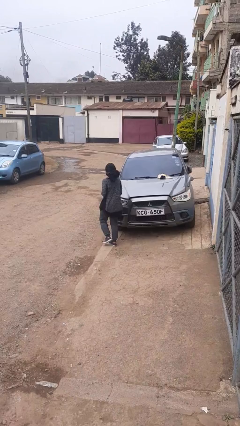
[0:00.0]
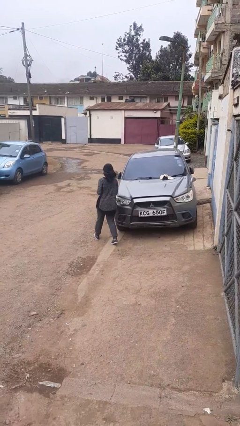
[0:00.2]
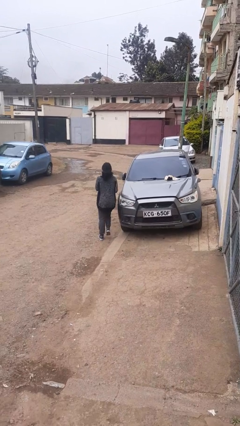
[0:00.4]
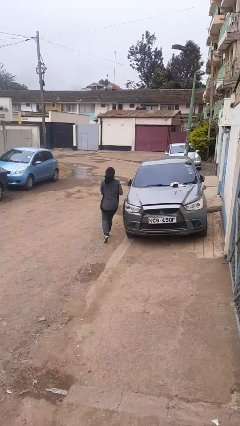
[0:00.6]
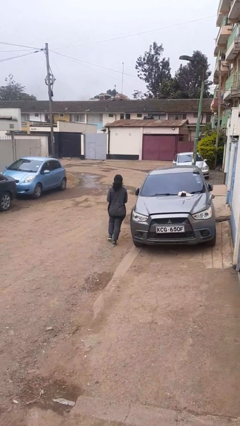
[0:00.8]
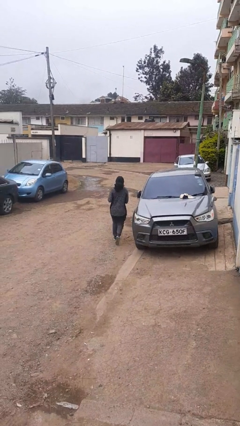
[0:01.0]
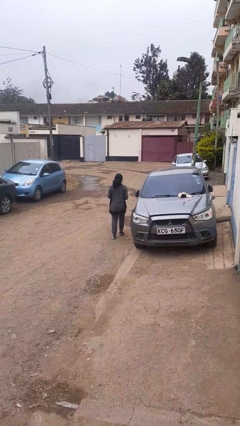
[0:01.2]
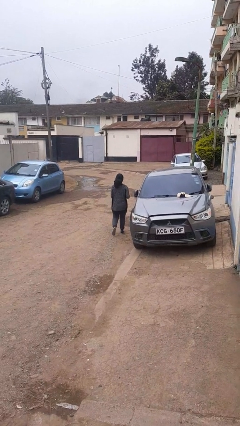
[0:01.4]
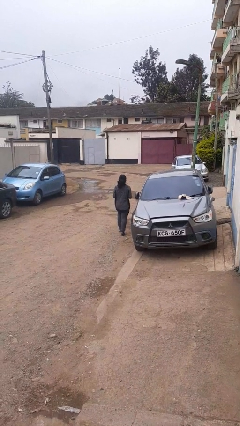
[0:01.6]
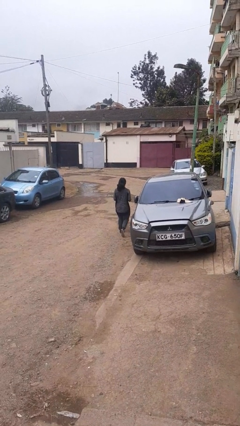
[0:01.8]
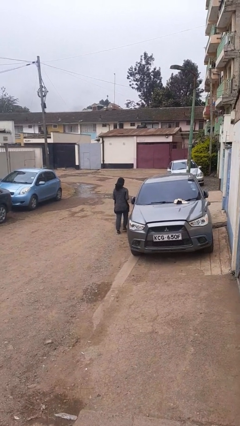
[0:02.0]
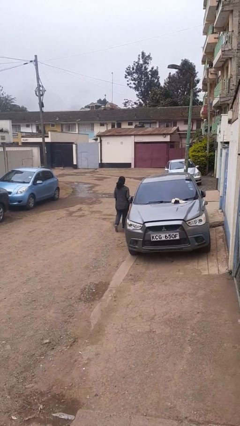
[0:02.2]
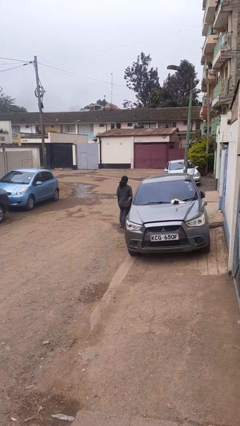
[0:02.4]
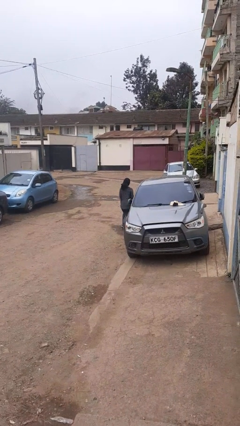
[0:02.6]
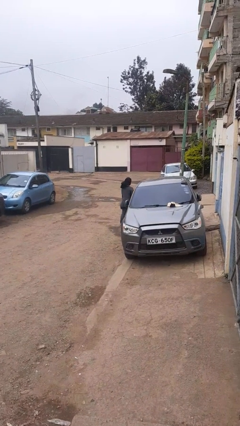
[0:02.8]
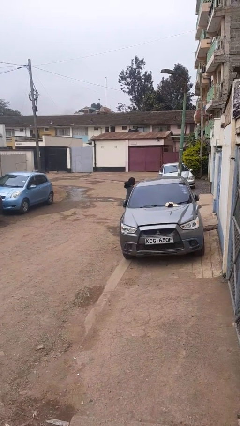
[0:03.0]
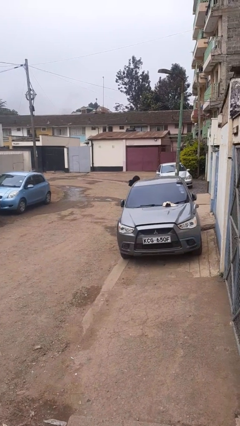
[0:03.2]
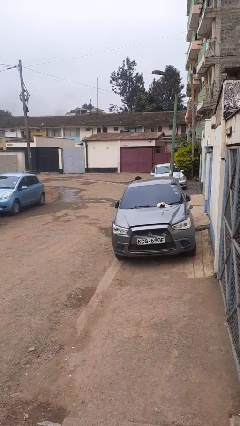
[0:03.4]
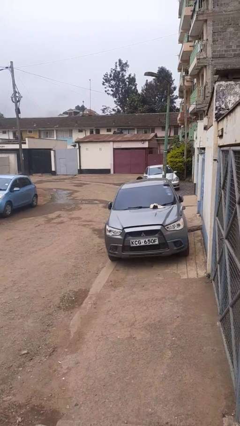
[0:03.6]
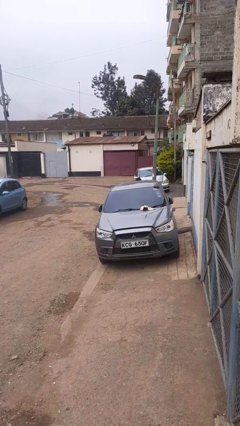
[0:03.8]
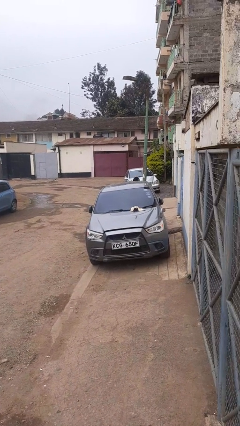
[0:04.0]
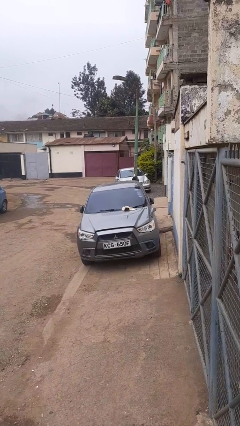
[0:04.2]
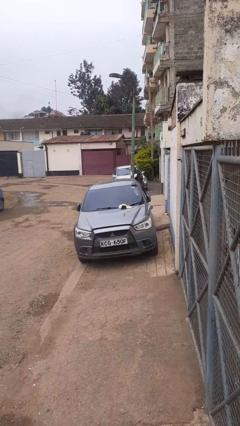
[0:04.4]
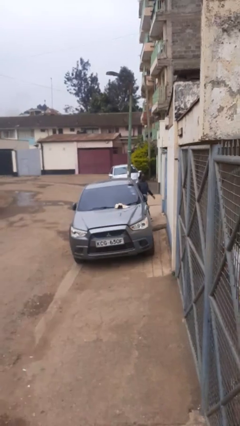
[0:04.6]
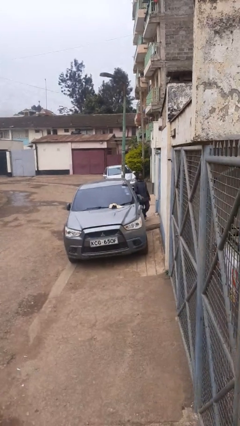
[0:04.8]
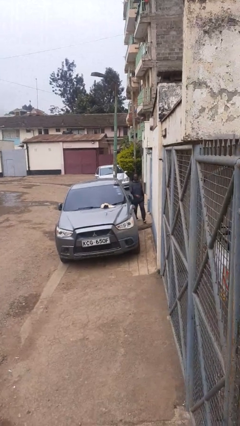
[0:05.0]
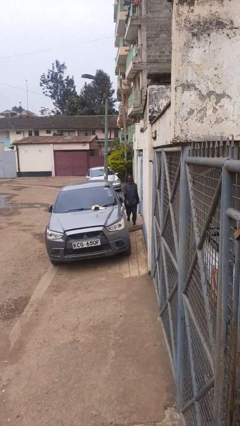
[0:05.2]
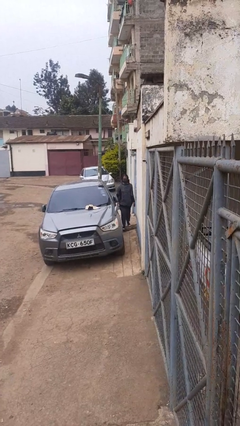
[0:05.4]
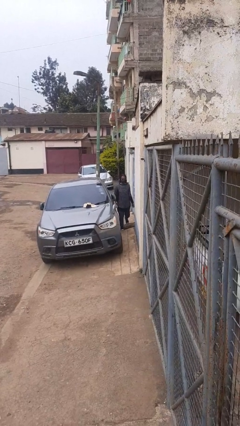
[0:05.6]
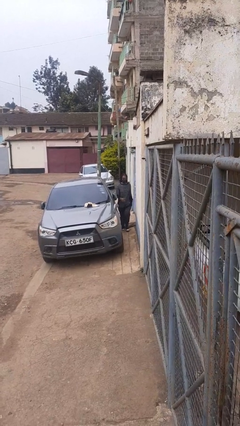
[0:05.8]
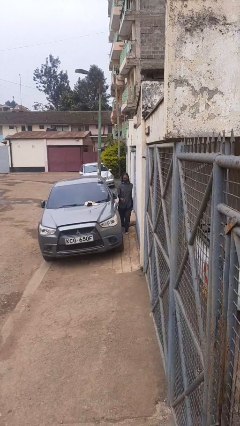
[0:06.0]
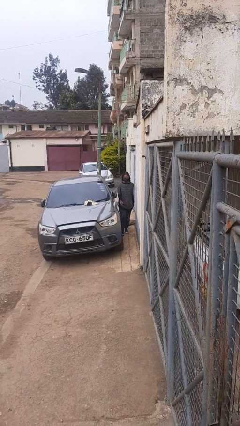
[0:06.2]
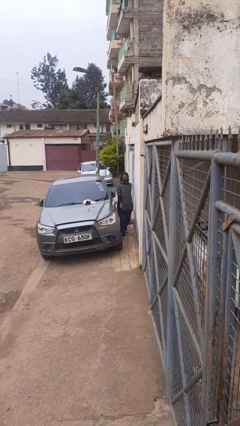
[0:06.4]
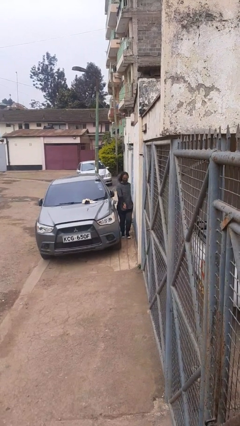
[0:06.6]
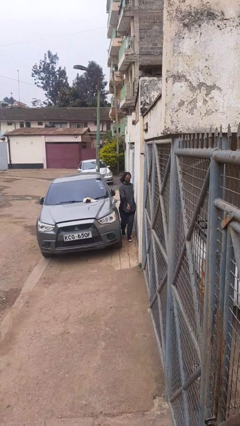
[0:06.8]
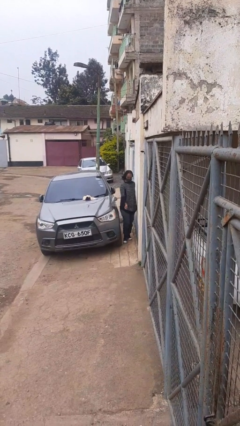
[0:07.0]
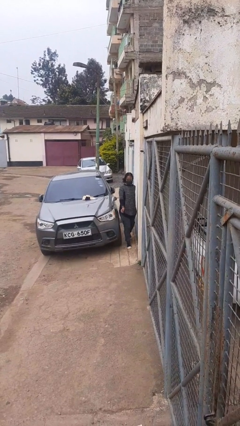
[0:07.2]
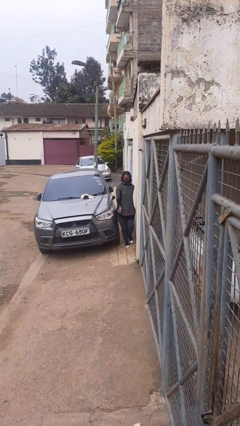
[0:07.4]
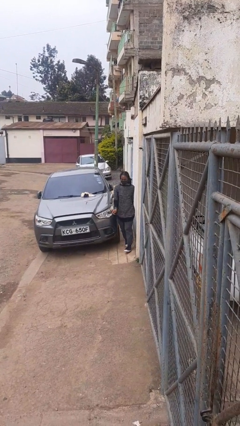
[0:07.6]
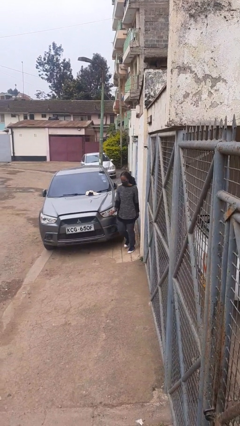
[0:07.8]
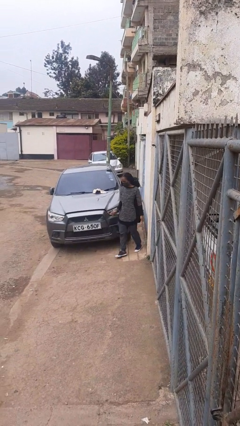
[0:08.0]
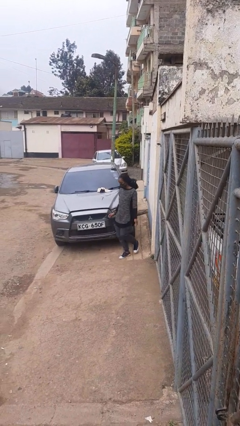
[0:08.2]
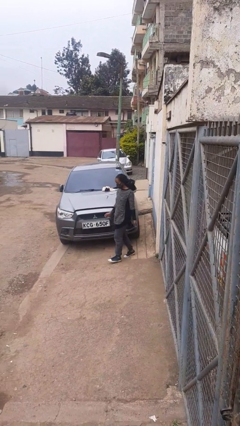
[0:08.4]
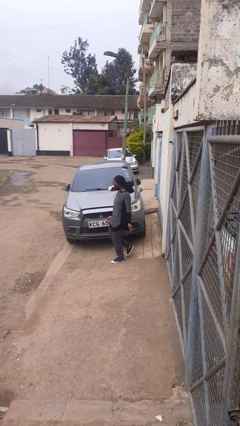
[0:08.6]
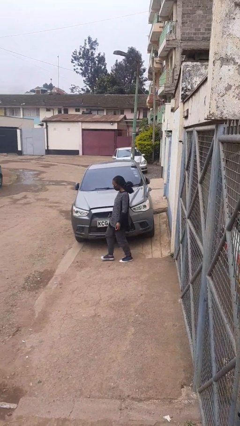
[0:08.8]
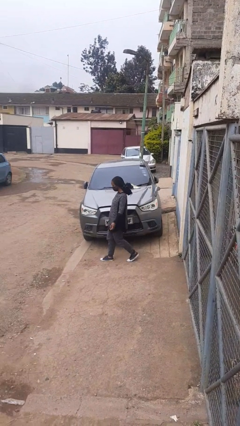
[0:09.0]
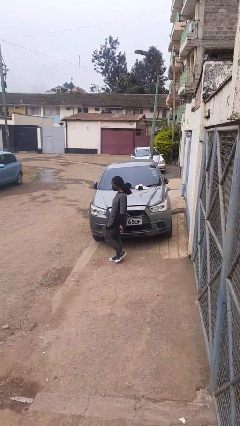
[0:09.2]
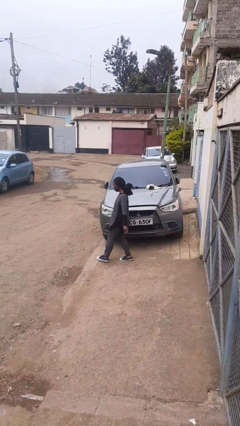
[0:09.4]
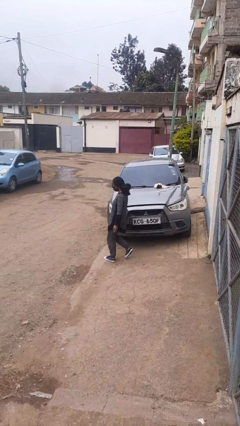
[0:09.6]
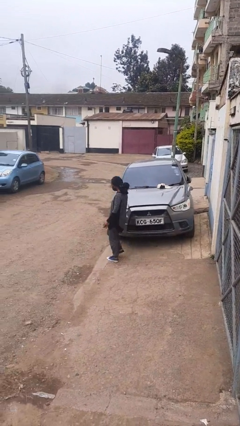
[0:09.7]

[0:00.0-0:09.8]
person walks around car

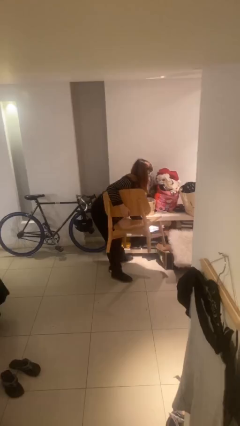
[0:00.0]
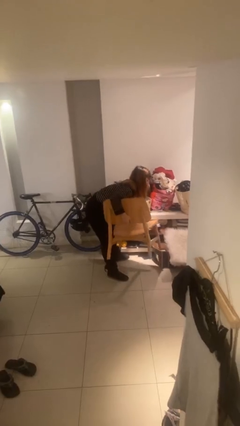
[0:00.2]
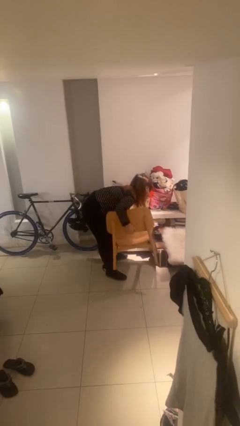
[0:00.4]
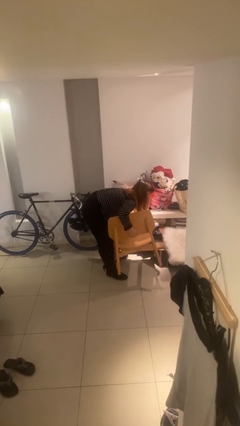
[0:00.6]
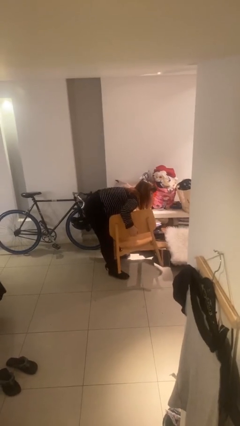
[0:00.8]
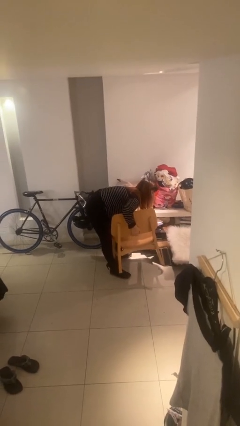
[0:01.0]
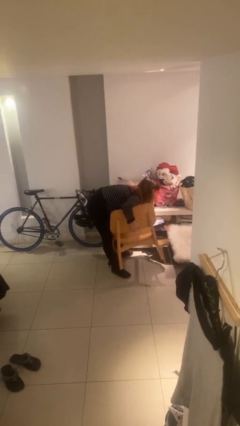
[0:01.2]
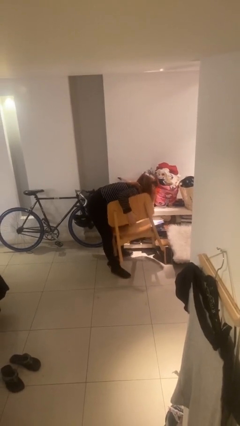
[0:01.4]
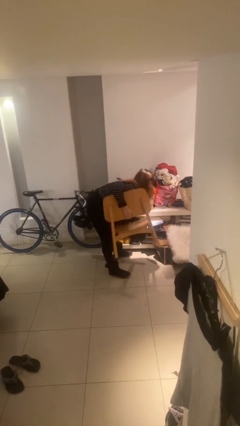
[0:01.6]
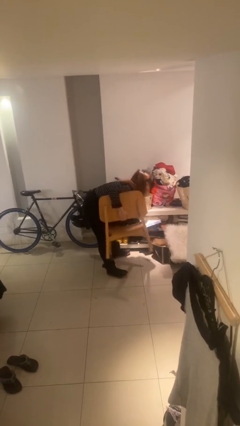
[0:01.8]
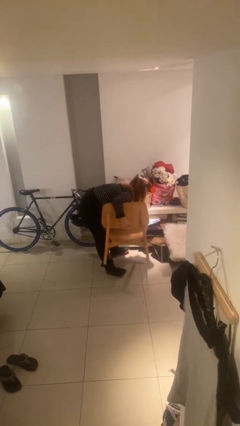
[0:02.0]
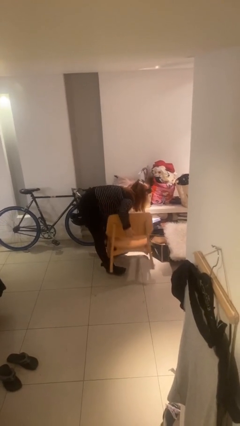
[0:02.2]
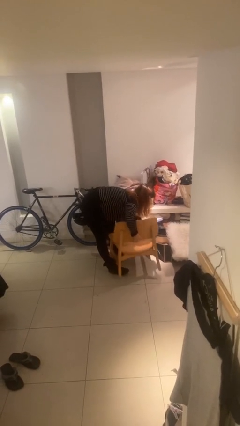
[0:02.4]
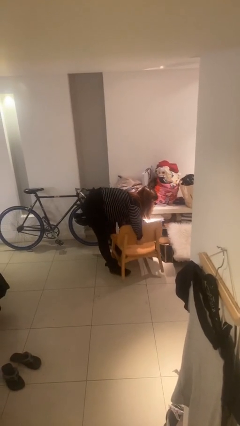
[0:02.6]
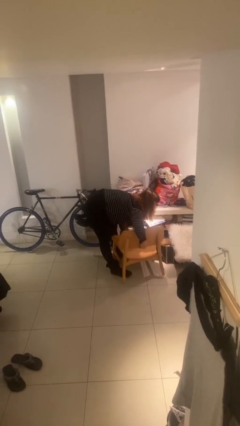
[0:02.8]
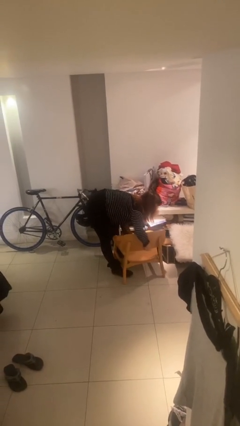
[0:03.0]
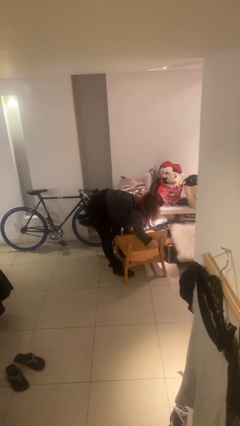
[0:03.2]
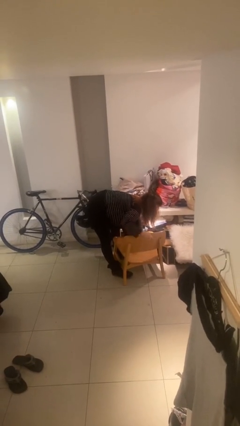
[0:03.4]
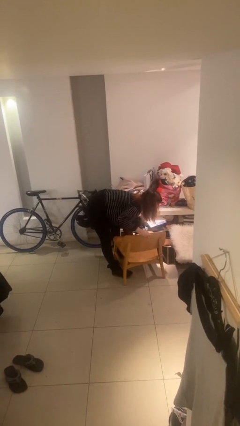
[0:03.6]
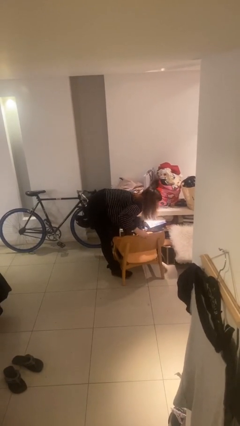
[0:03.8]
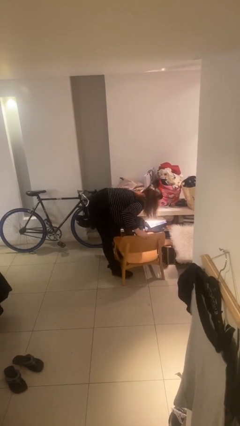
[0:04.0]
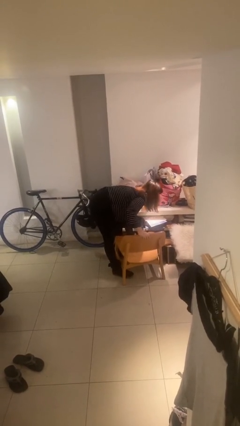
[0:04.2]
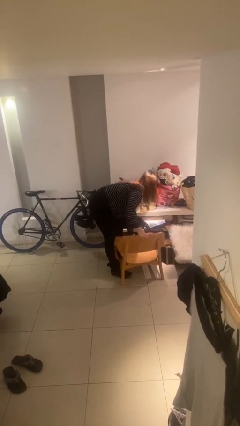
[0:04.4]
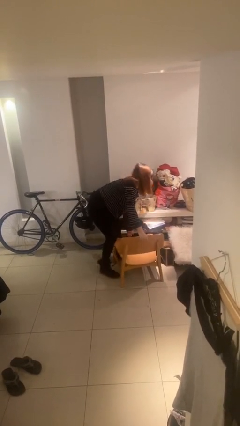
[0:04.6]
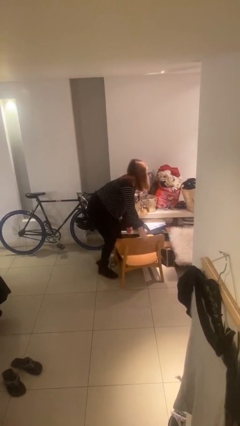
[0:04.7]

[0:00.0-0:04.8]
person puts down object on floor

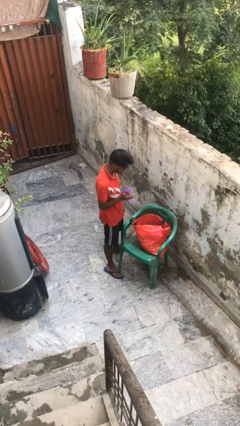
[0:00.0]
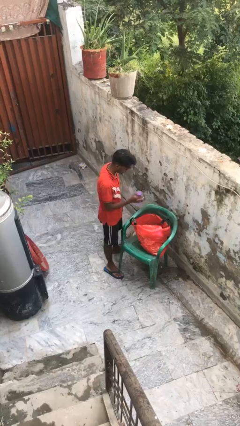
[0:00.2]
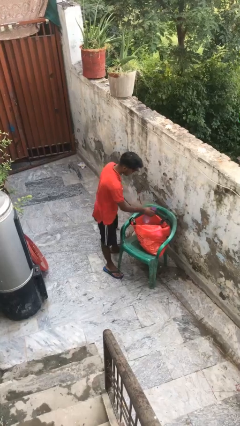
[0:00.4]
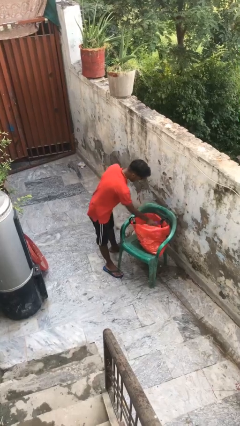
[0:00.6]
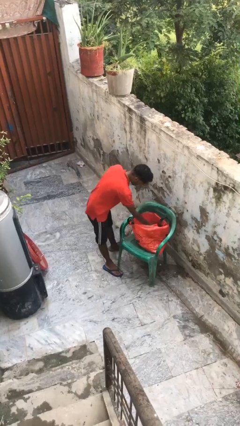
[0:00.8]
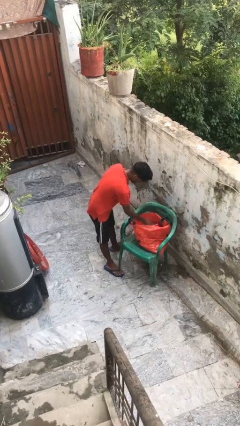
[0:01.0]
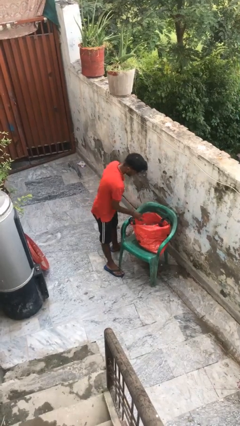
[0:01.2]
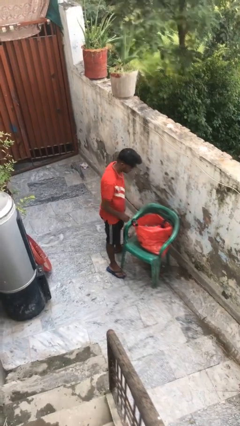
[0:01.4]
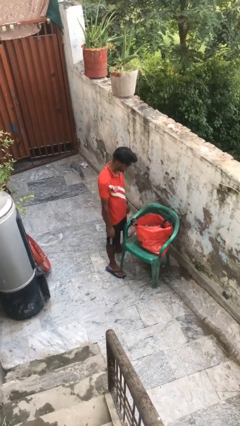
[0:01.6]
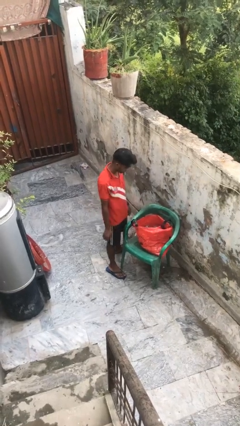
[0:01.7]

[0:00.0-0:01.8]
person puts object into bag

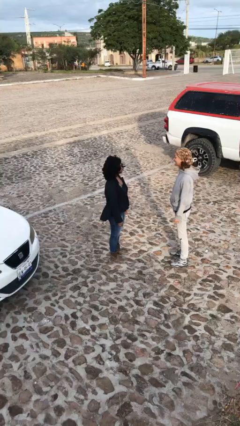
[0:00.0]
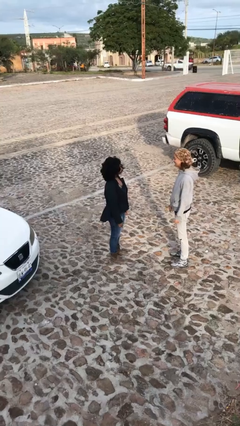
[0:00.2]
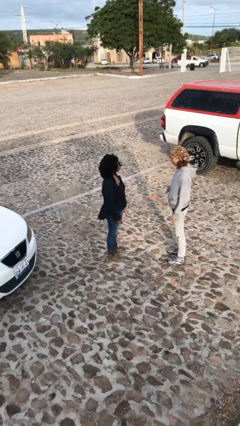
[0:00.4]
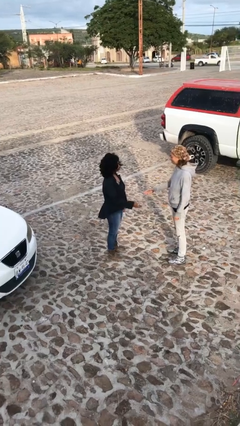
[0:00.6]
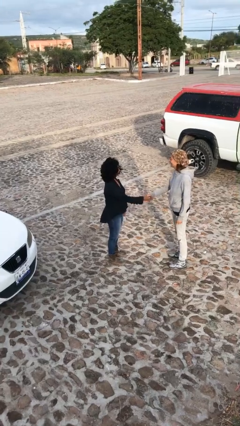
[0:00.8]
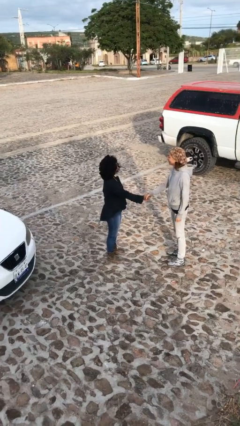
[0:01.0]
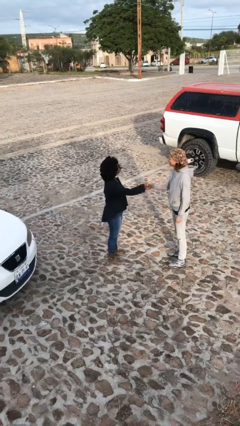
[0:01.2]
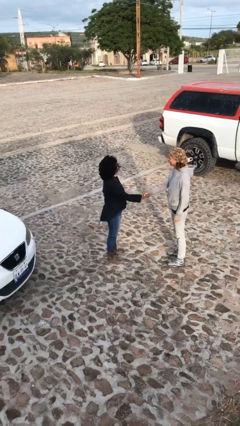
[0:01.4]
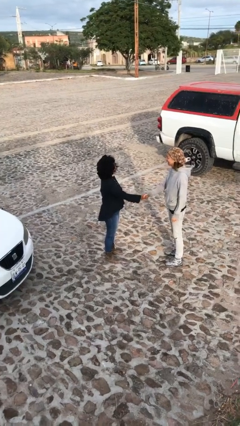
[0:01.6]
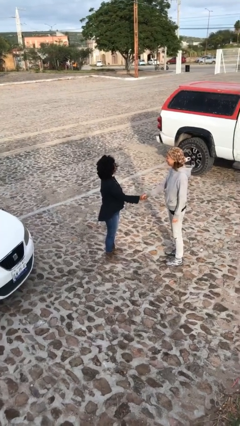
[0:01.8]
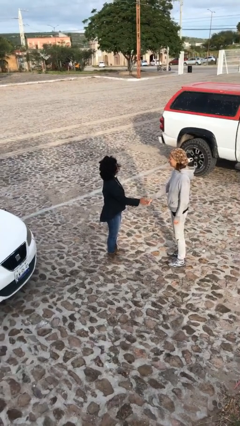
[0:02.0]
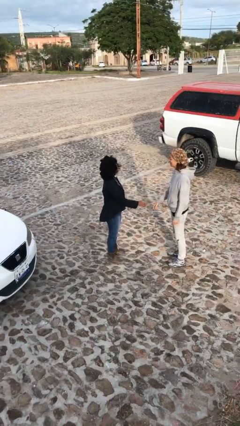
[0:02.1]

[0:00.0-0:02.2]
person shakes hand
